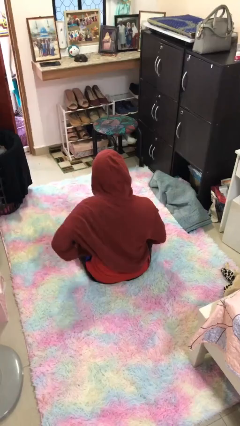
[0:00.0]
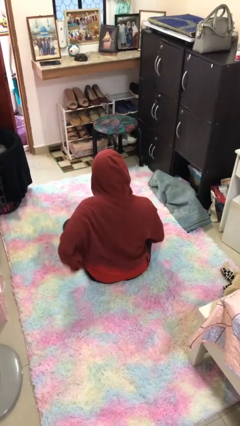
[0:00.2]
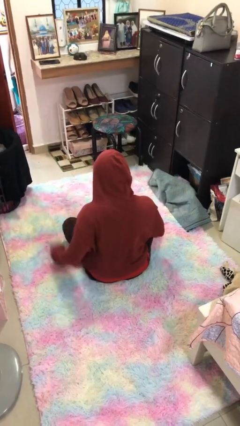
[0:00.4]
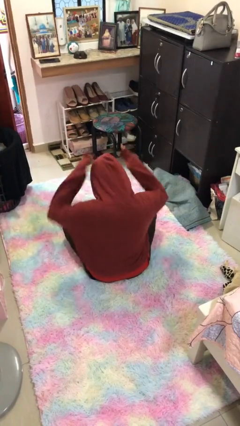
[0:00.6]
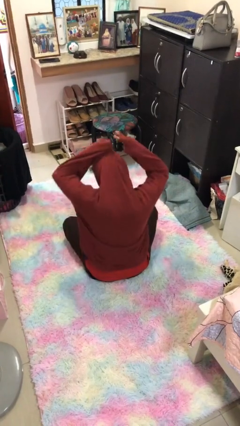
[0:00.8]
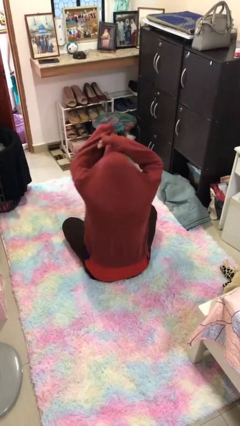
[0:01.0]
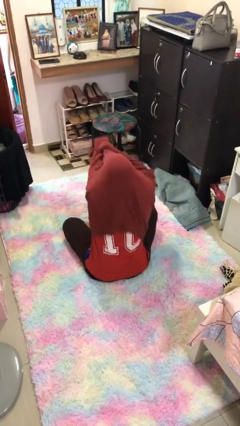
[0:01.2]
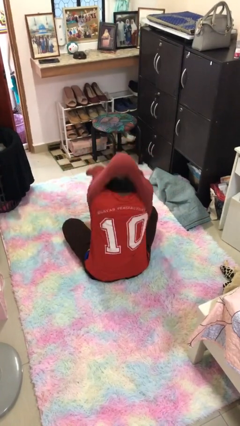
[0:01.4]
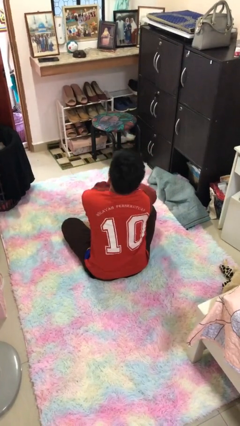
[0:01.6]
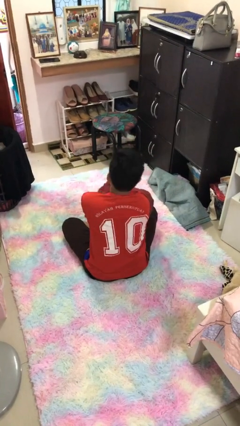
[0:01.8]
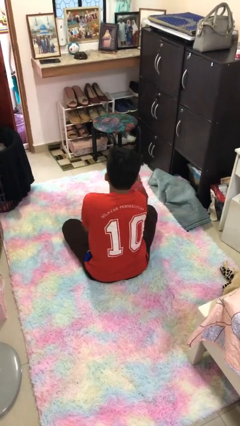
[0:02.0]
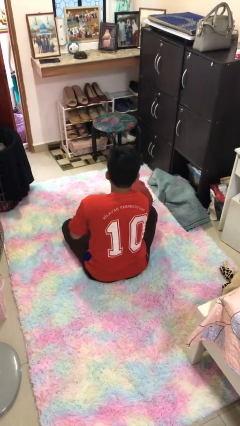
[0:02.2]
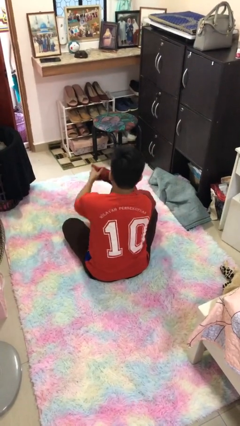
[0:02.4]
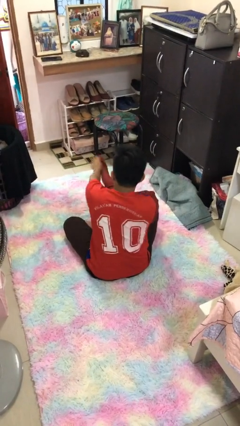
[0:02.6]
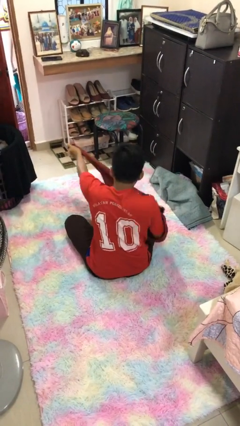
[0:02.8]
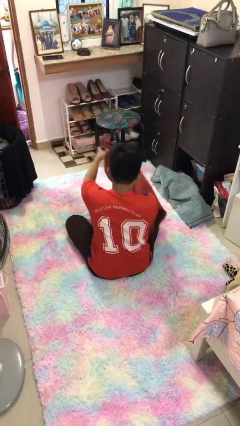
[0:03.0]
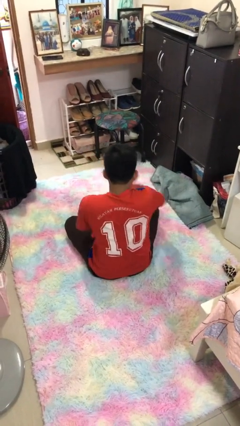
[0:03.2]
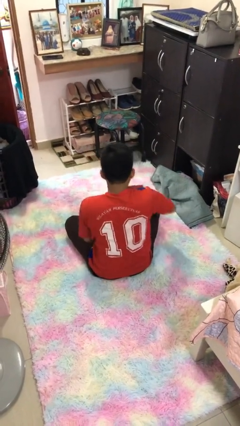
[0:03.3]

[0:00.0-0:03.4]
person takes off hoodie

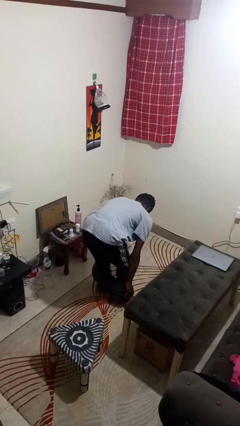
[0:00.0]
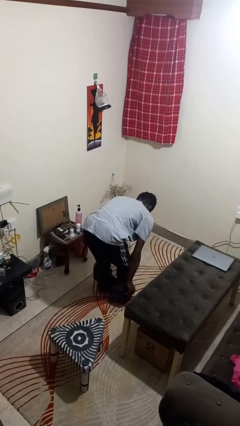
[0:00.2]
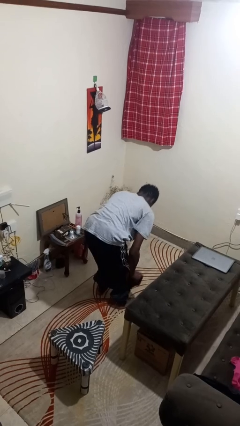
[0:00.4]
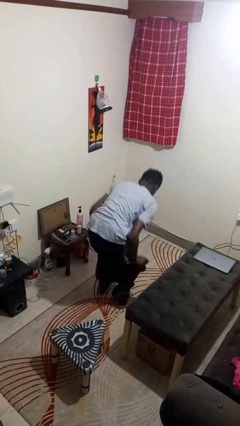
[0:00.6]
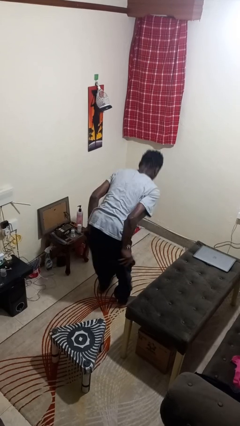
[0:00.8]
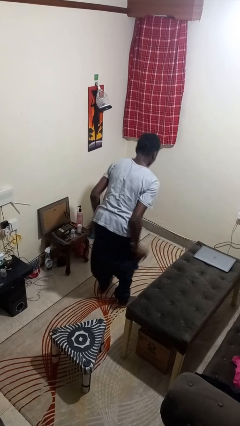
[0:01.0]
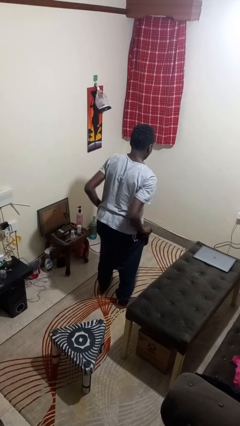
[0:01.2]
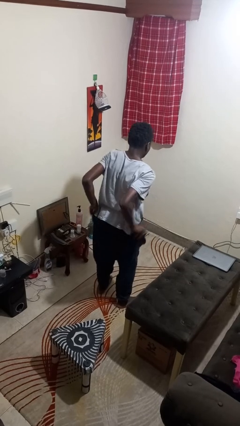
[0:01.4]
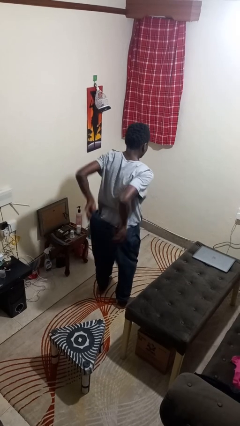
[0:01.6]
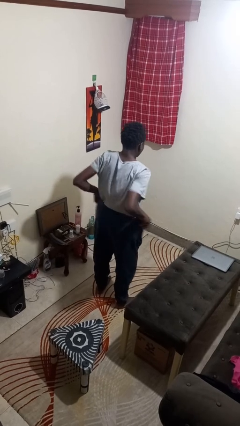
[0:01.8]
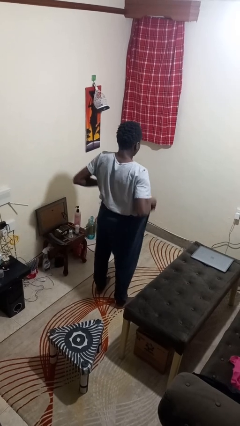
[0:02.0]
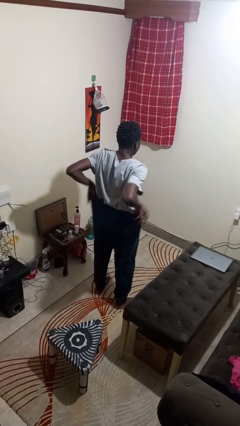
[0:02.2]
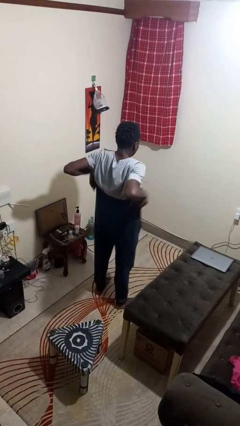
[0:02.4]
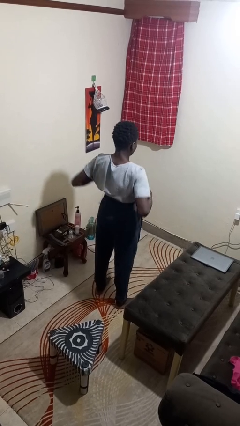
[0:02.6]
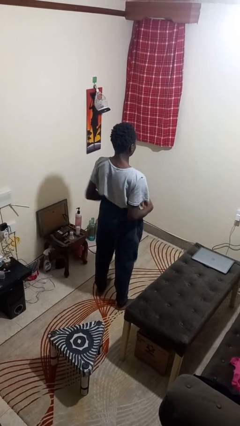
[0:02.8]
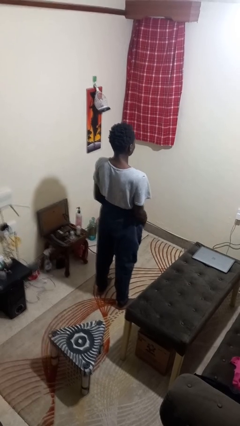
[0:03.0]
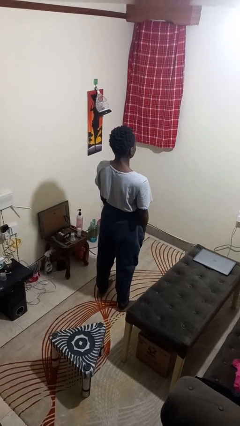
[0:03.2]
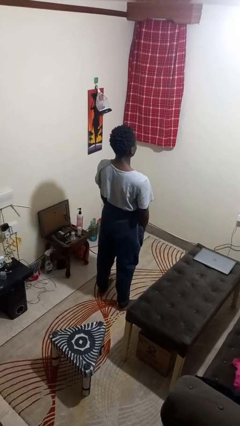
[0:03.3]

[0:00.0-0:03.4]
person puts on pants

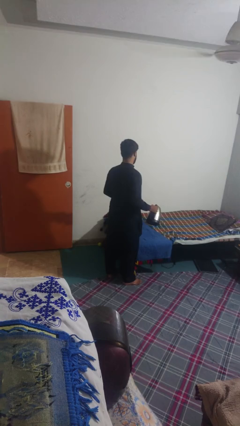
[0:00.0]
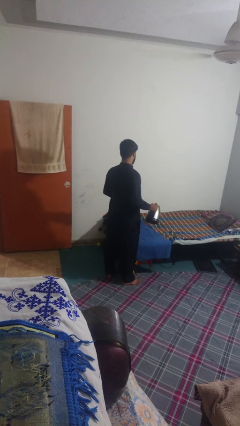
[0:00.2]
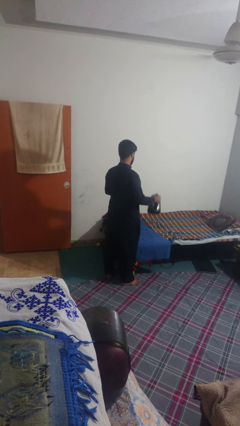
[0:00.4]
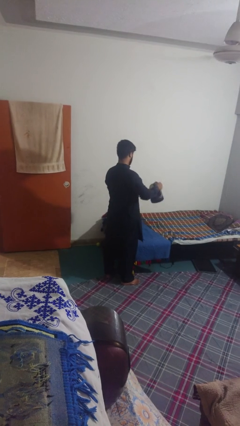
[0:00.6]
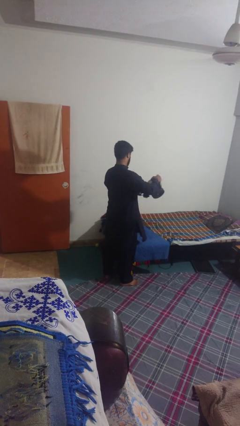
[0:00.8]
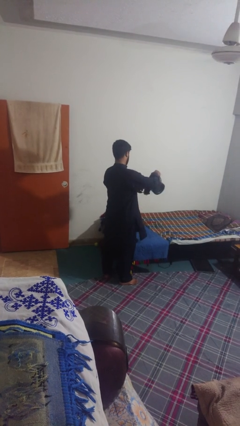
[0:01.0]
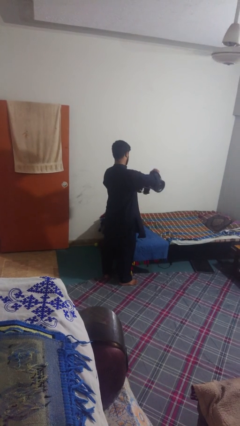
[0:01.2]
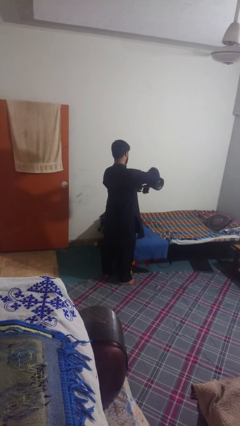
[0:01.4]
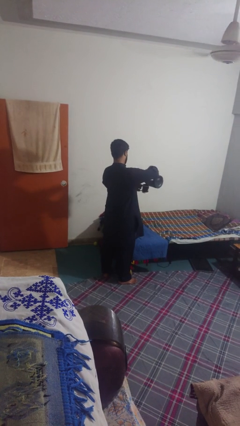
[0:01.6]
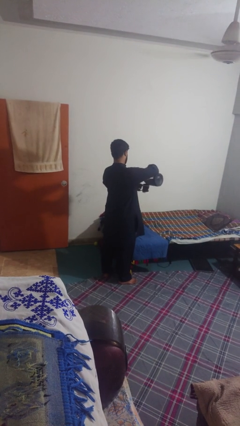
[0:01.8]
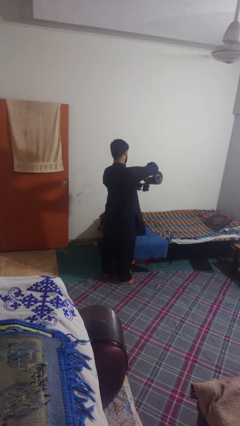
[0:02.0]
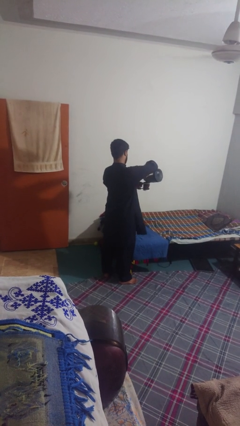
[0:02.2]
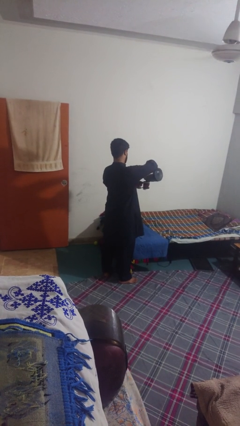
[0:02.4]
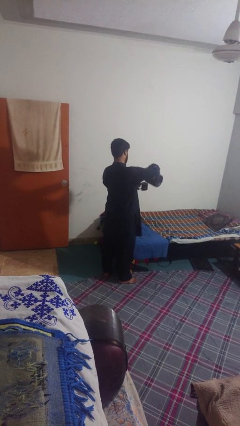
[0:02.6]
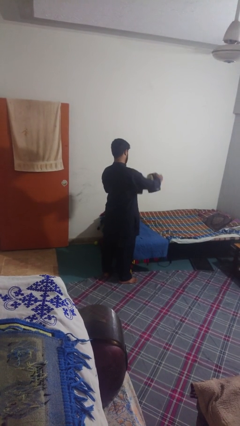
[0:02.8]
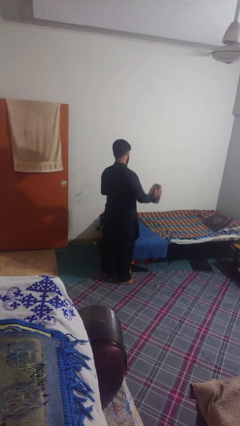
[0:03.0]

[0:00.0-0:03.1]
person pours coffee into mug

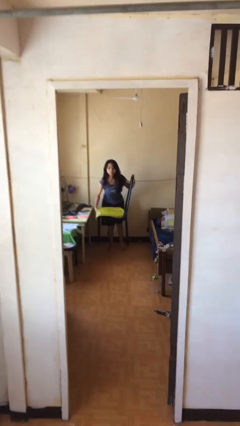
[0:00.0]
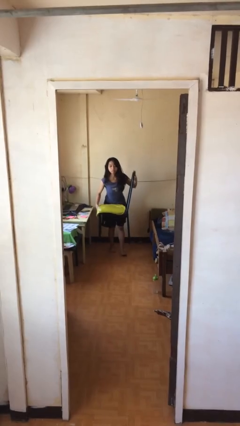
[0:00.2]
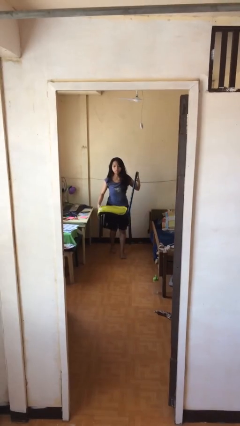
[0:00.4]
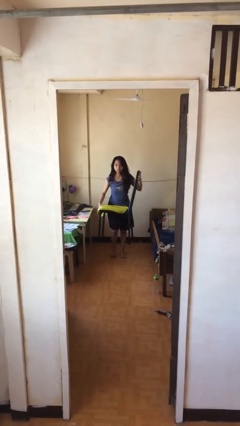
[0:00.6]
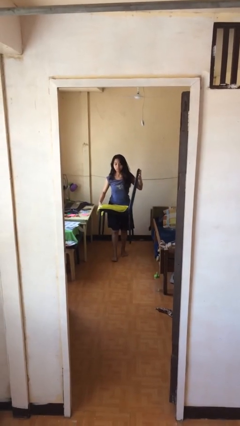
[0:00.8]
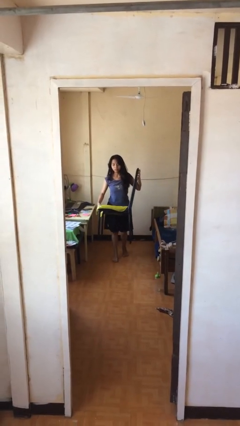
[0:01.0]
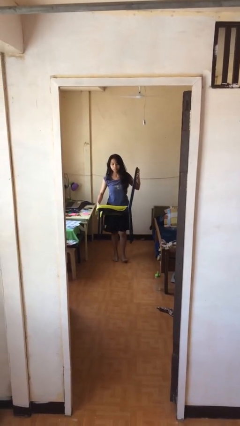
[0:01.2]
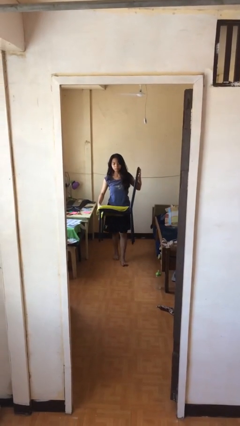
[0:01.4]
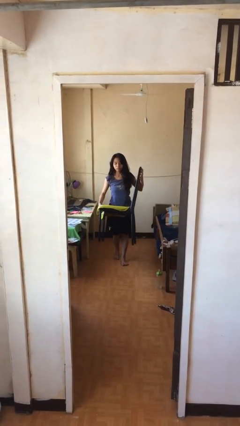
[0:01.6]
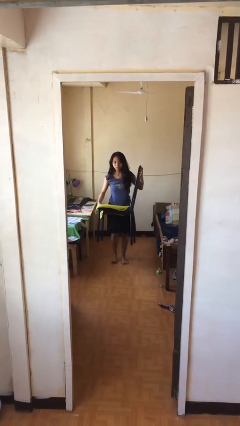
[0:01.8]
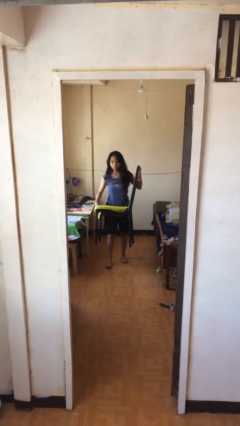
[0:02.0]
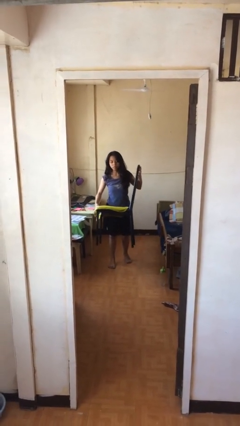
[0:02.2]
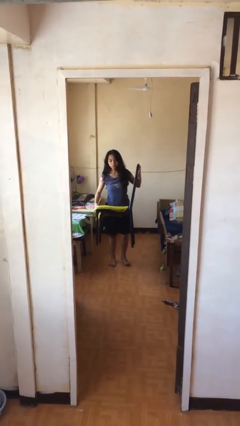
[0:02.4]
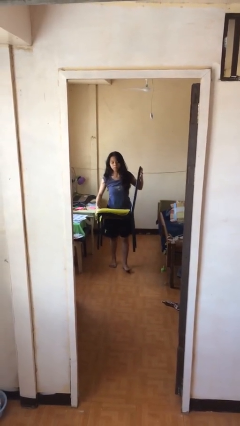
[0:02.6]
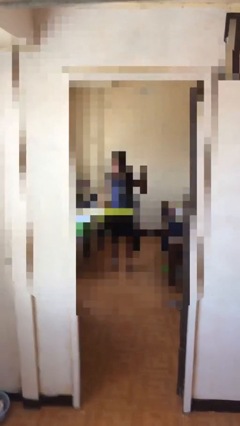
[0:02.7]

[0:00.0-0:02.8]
person carries heavy object

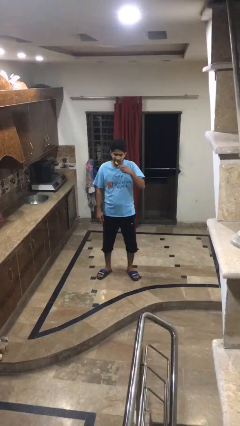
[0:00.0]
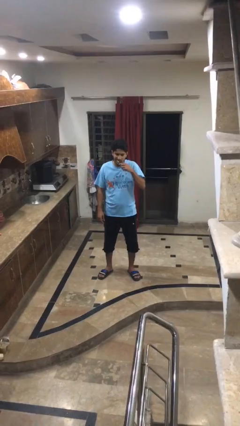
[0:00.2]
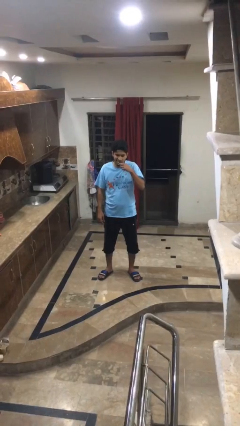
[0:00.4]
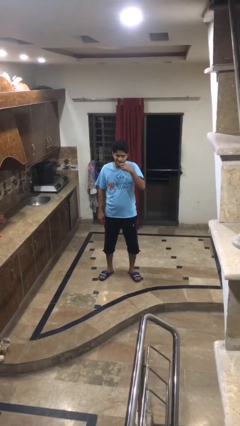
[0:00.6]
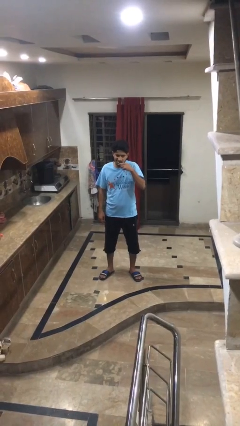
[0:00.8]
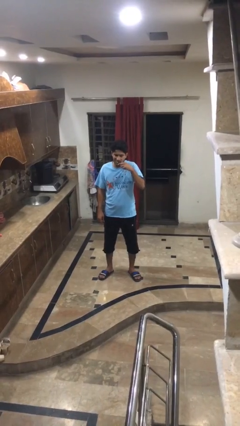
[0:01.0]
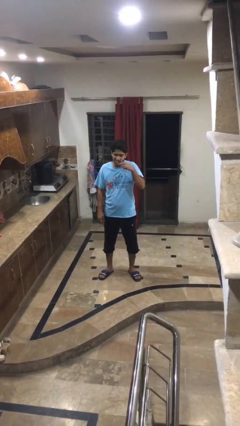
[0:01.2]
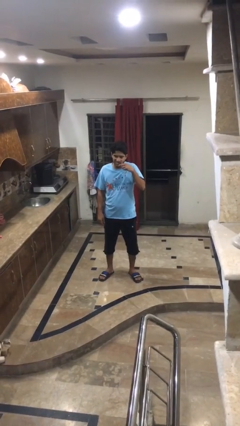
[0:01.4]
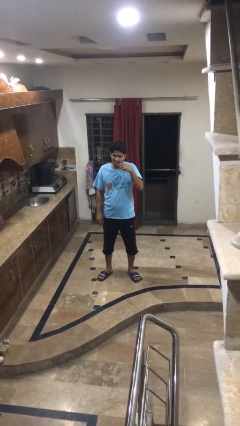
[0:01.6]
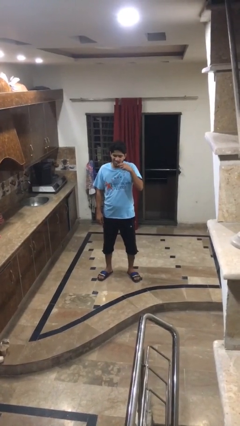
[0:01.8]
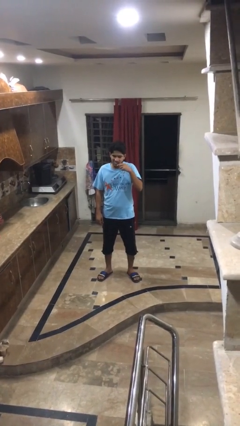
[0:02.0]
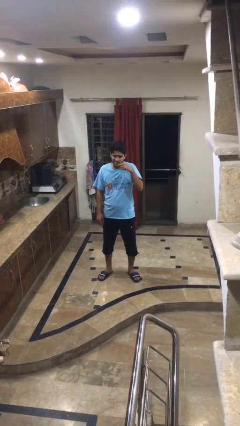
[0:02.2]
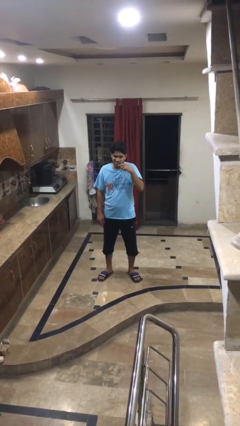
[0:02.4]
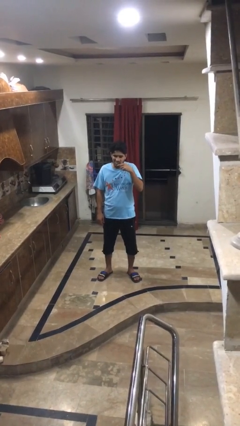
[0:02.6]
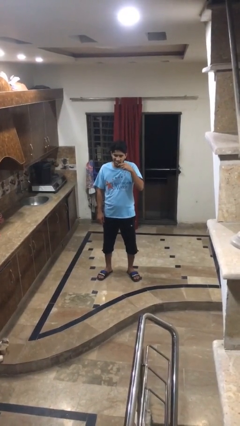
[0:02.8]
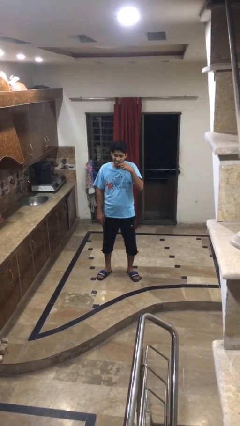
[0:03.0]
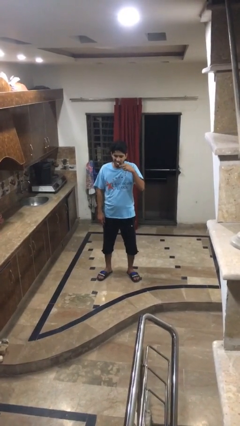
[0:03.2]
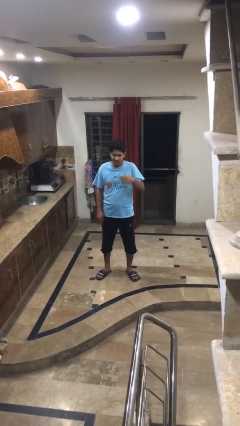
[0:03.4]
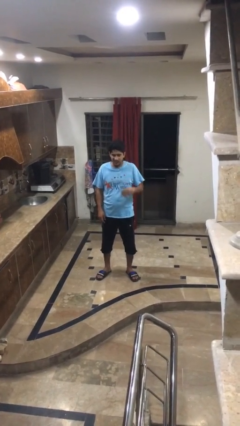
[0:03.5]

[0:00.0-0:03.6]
person brushes teeth

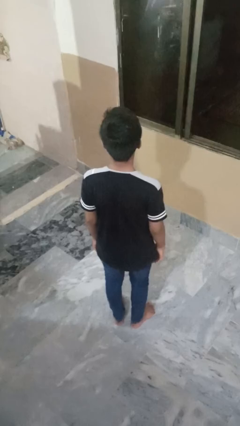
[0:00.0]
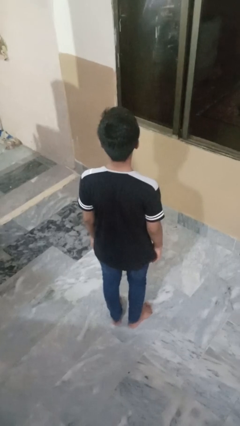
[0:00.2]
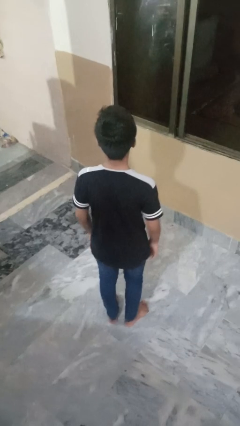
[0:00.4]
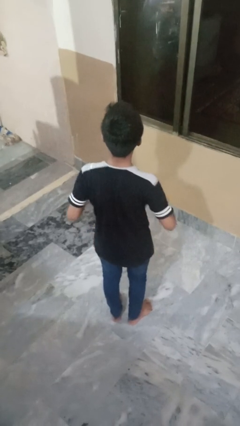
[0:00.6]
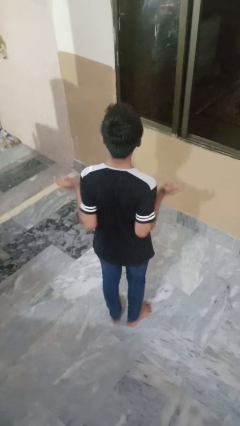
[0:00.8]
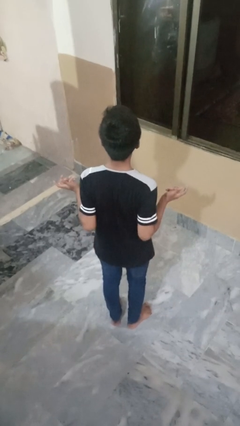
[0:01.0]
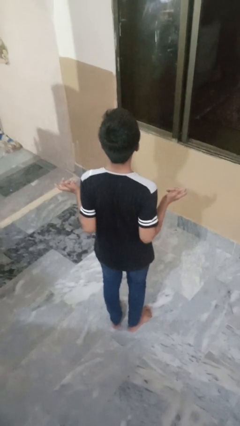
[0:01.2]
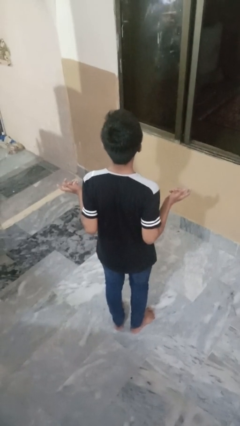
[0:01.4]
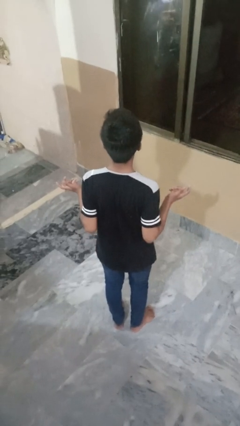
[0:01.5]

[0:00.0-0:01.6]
person shrugs
